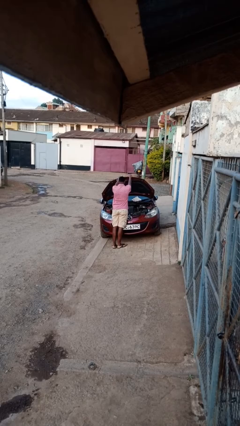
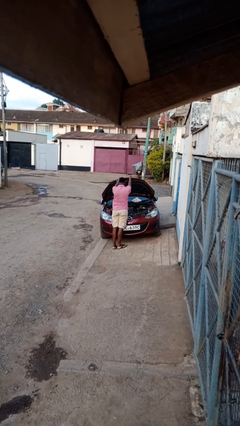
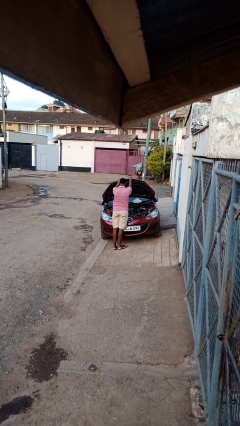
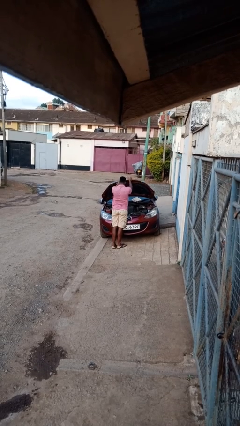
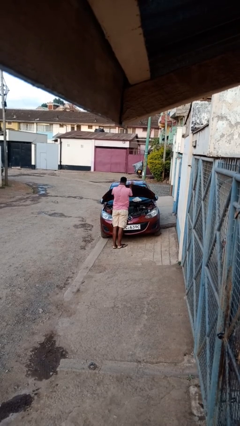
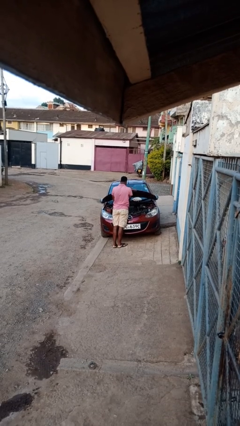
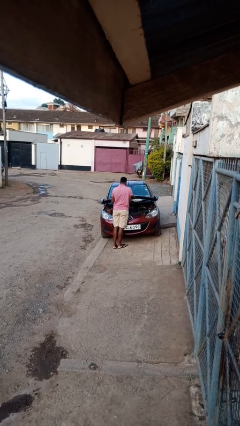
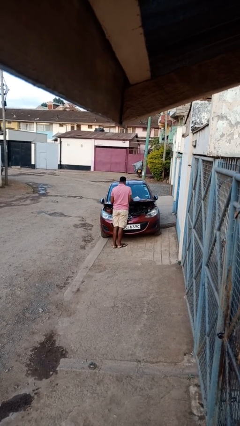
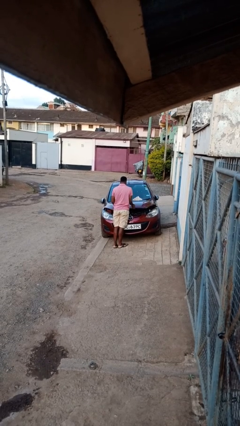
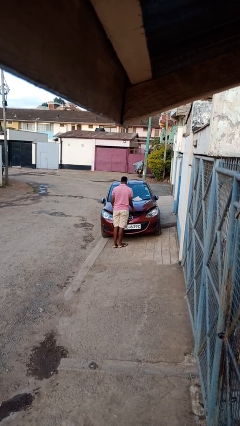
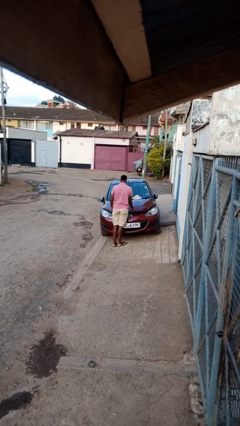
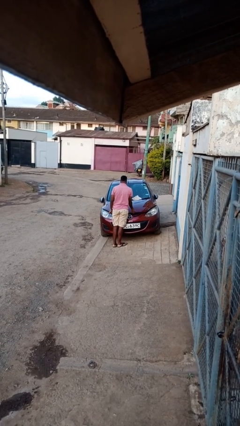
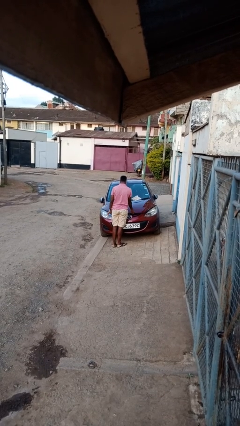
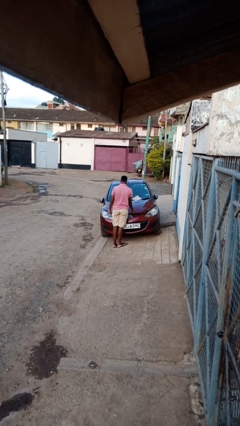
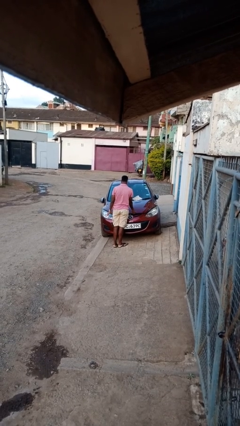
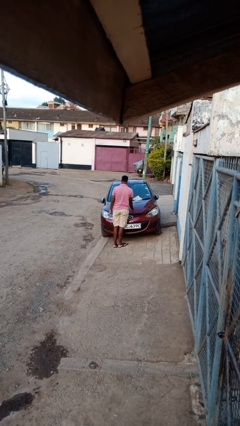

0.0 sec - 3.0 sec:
person closes car hood

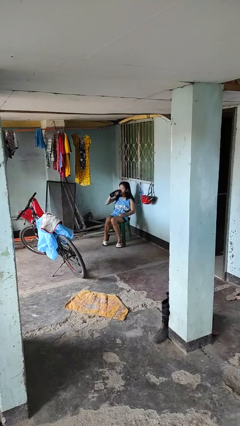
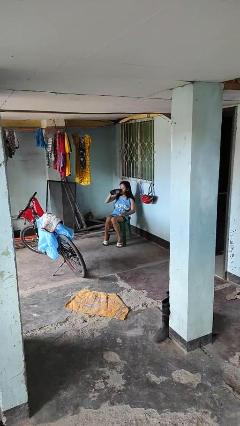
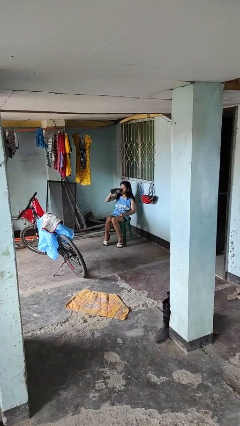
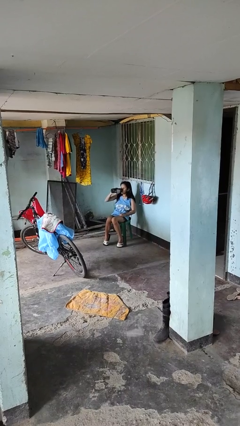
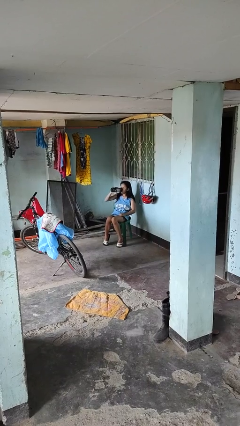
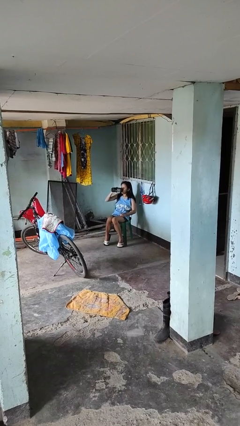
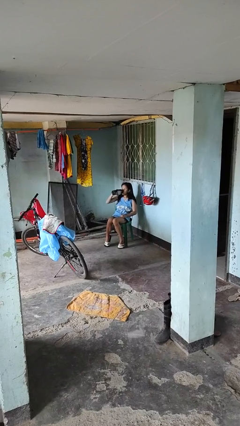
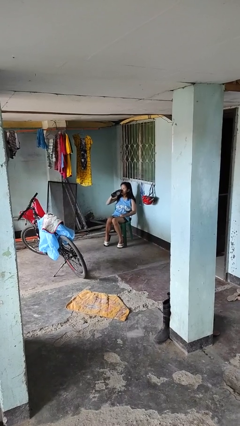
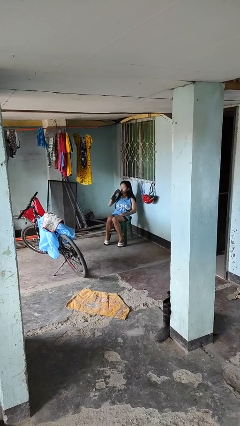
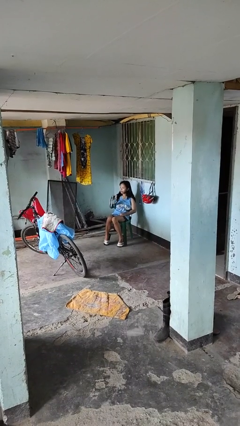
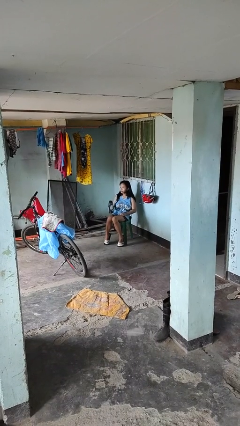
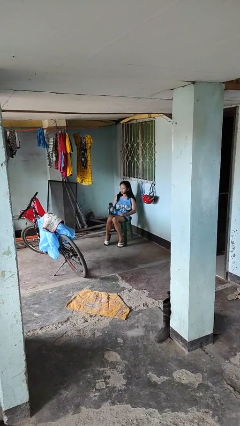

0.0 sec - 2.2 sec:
person drinks from bottle

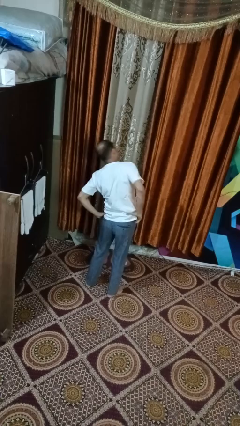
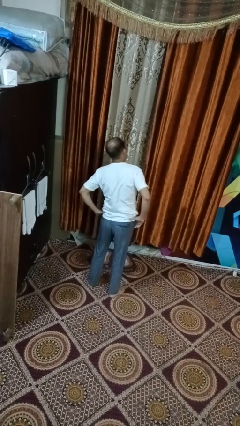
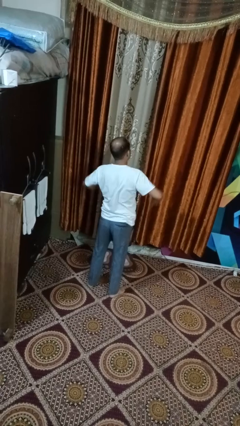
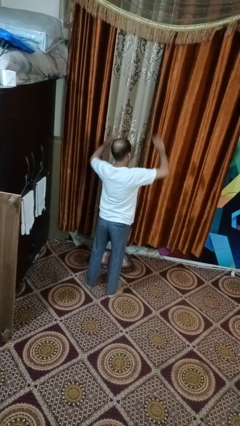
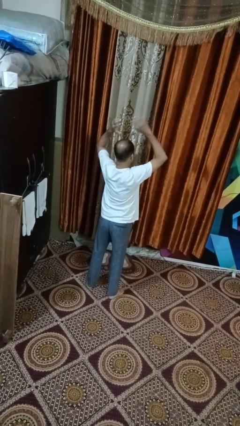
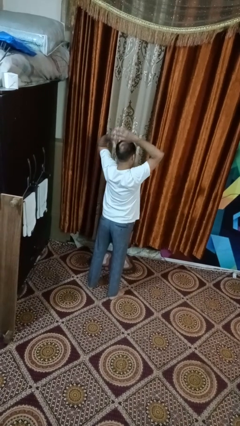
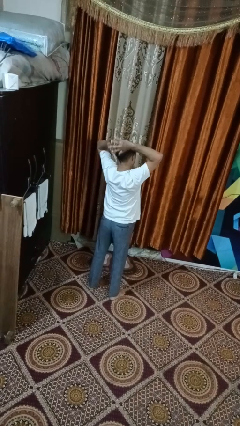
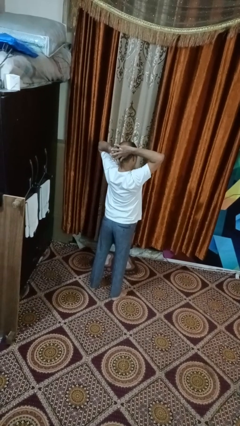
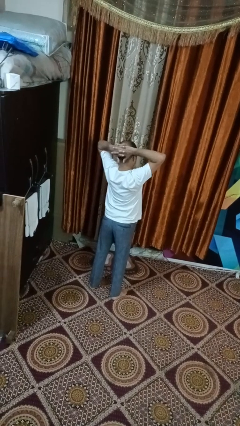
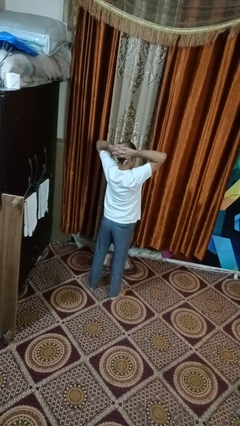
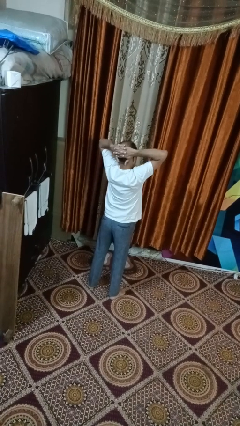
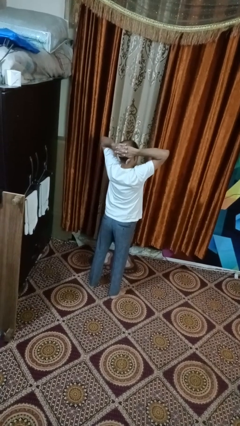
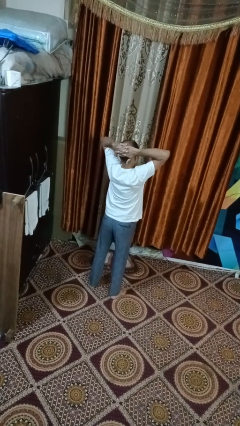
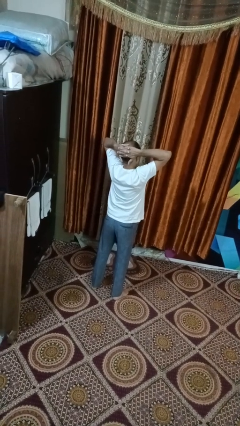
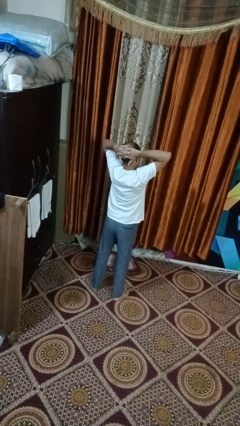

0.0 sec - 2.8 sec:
person stretches arms over head

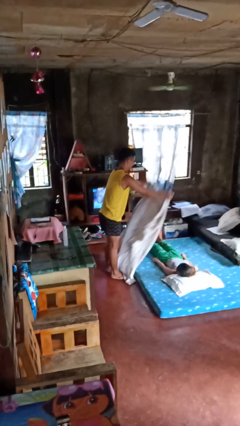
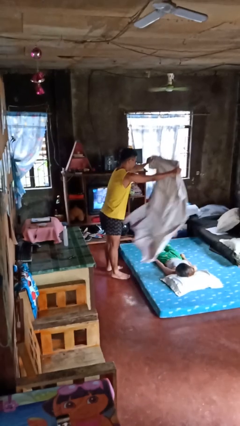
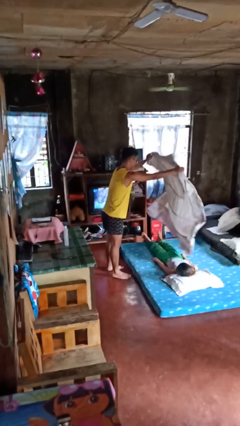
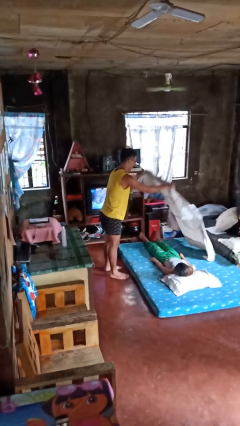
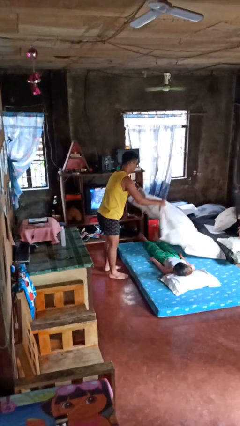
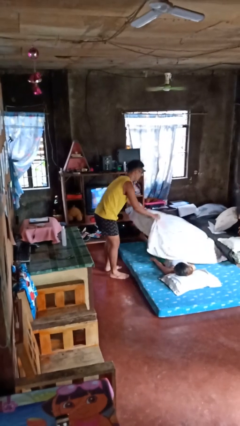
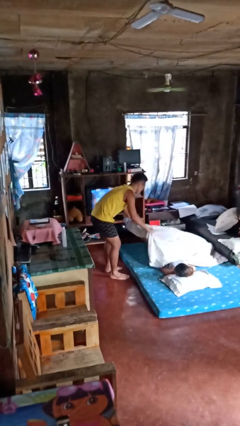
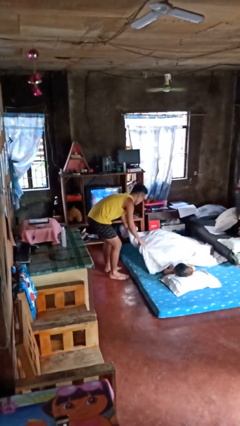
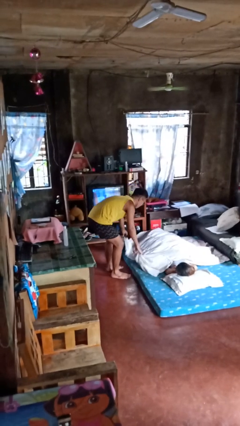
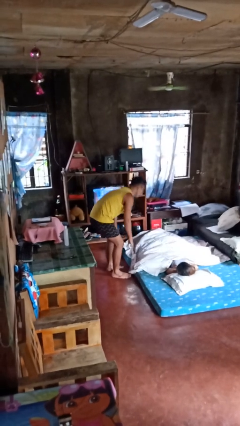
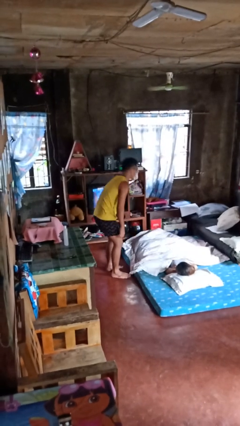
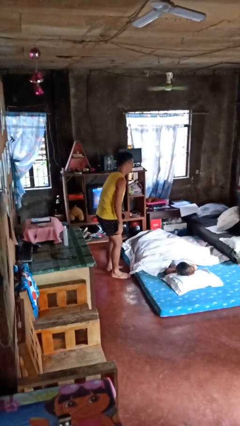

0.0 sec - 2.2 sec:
person covers friend with blanket

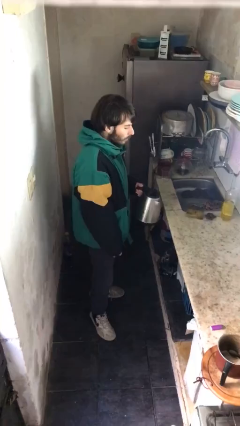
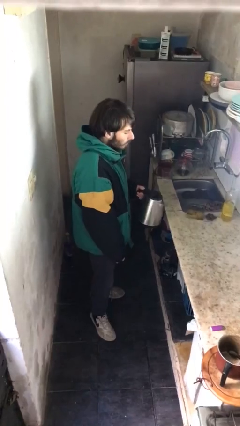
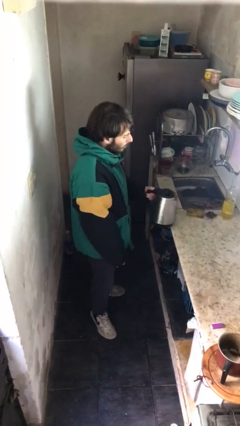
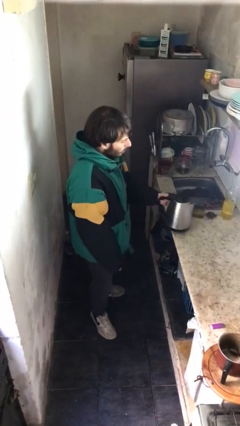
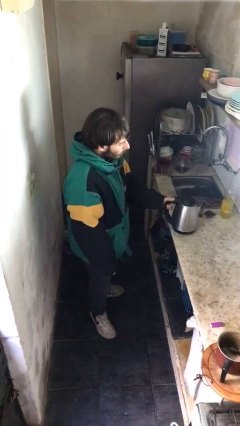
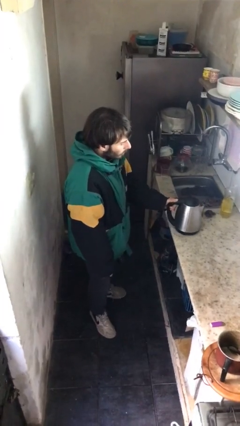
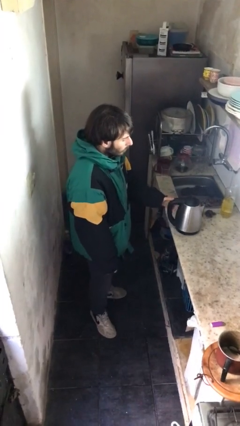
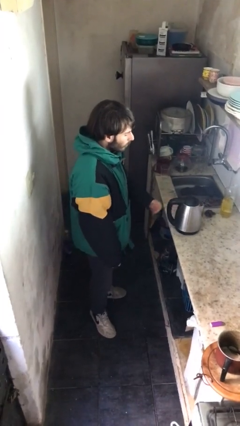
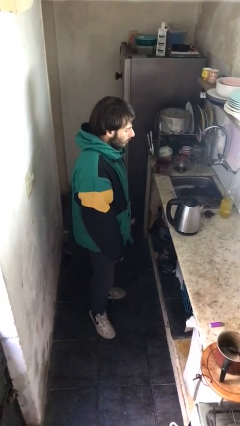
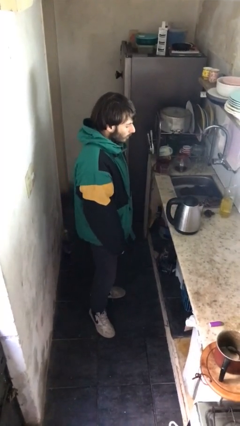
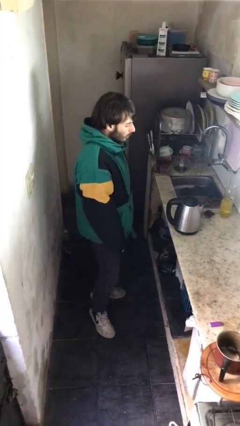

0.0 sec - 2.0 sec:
person puts down object on countertop

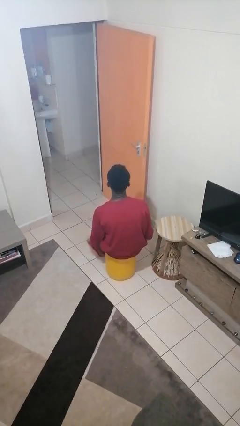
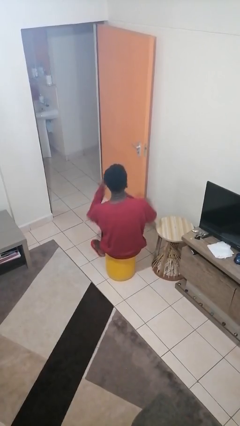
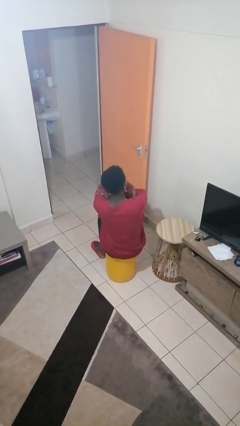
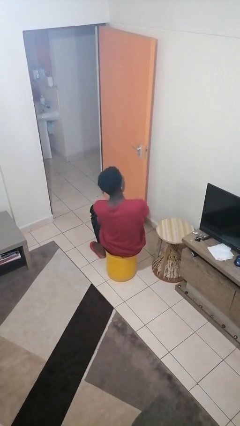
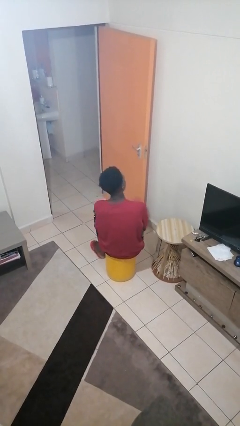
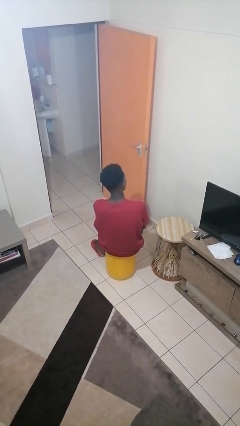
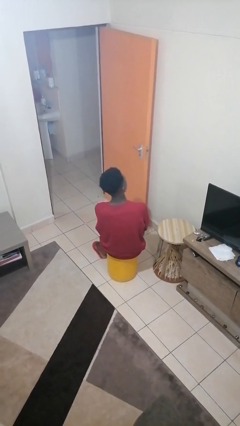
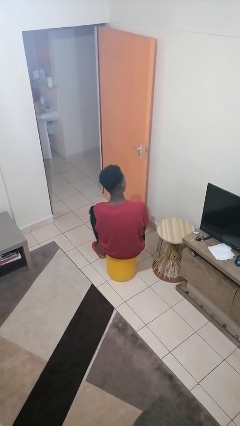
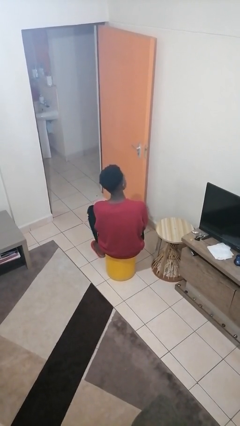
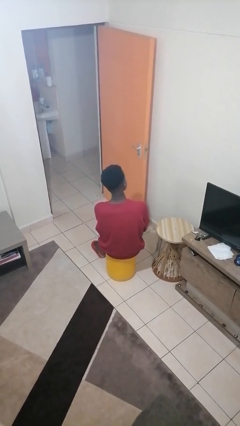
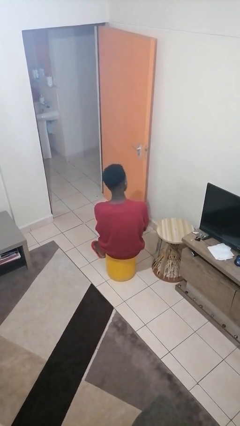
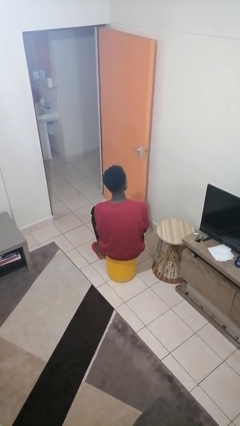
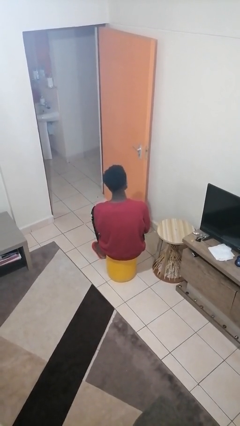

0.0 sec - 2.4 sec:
person crosses arms

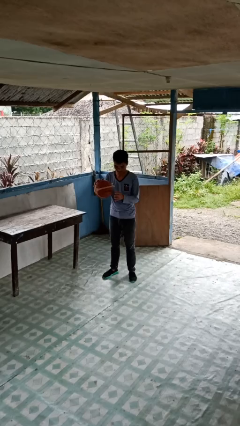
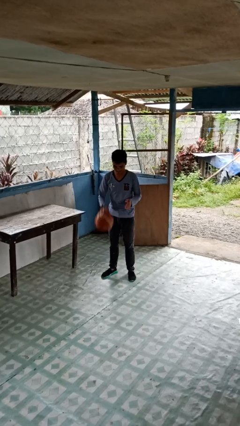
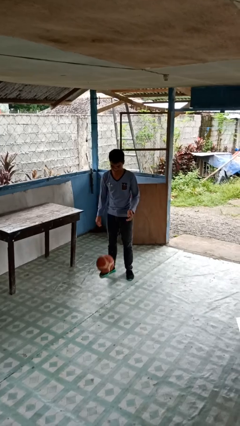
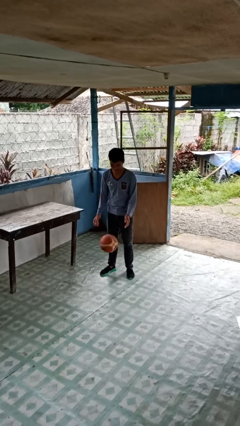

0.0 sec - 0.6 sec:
person bounces ball on floor

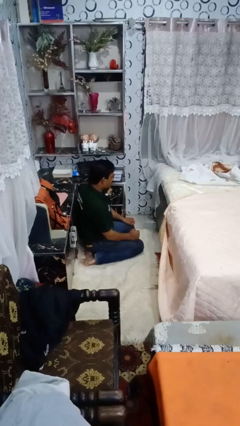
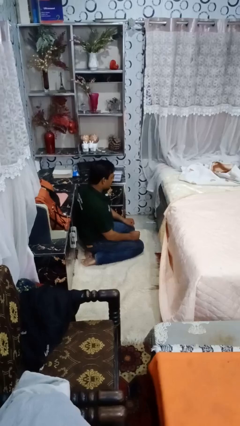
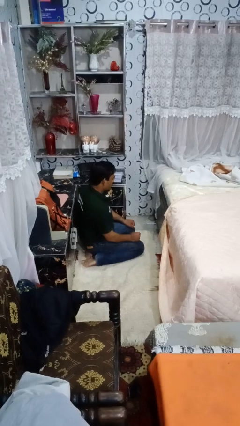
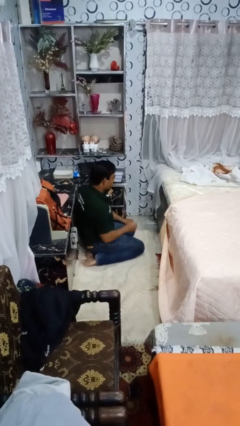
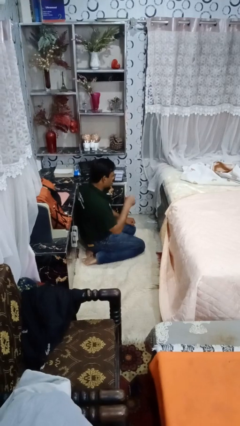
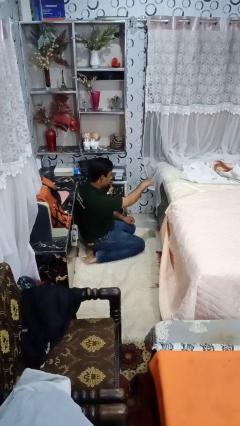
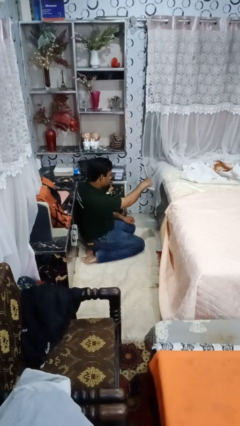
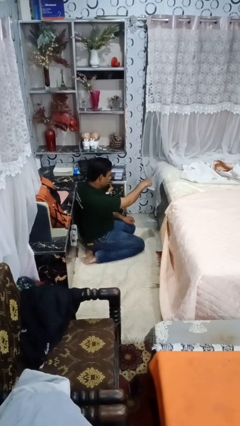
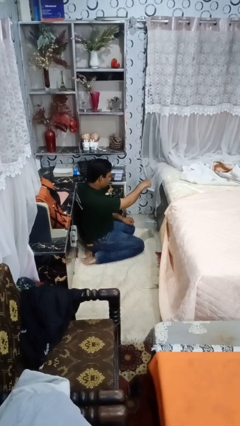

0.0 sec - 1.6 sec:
person punches
